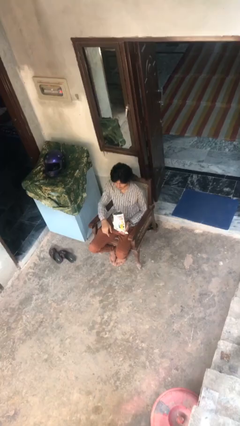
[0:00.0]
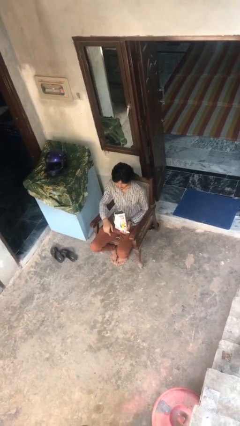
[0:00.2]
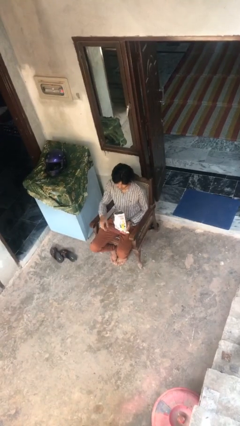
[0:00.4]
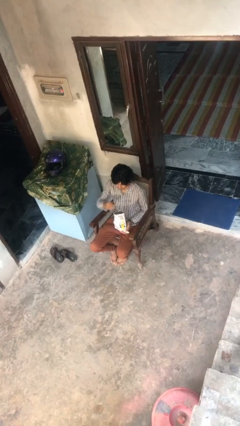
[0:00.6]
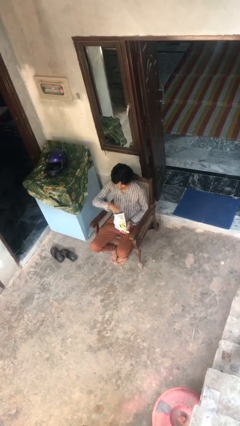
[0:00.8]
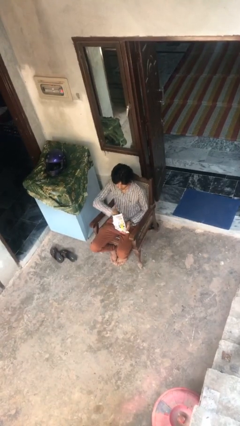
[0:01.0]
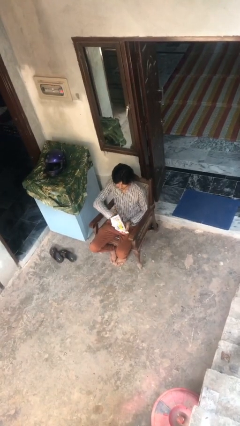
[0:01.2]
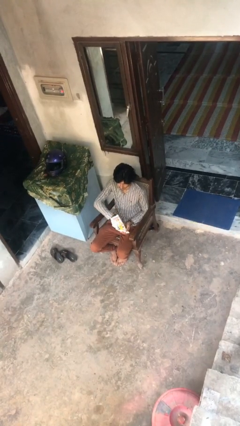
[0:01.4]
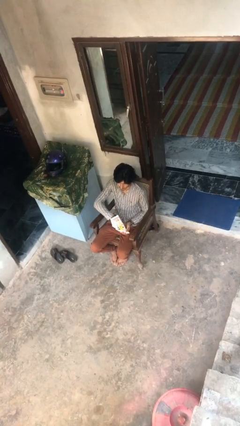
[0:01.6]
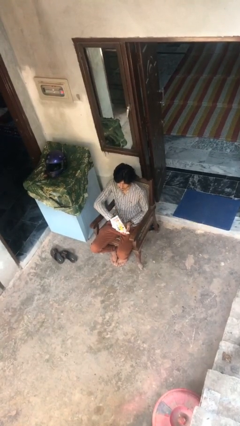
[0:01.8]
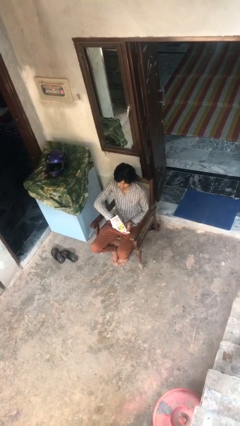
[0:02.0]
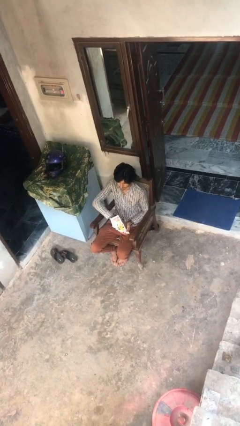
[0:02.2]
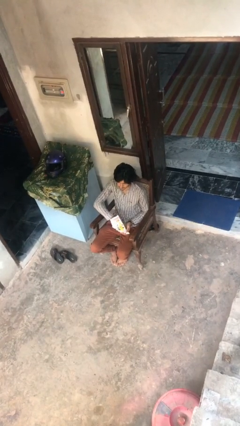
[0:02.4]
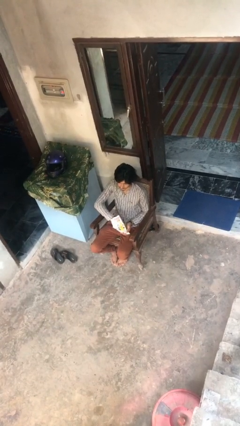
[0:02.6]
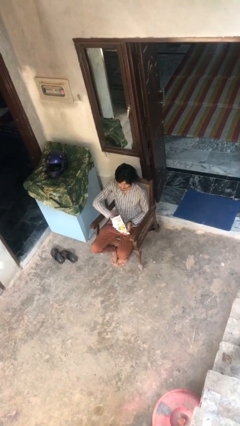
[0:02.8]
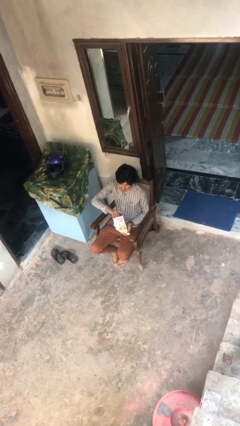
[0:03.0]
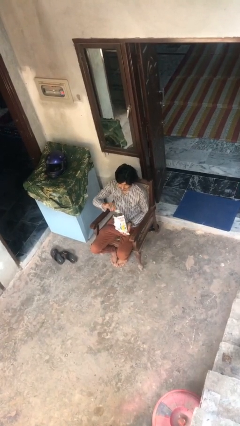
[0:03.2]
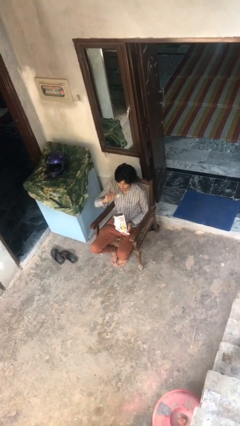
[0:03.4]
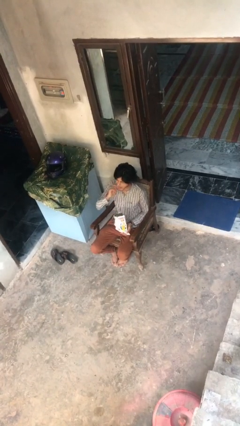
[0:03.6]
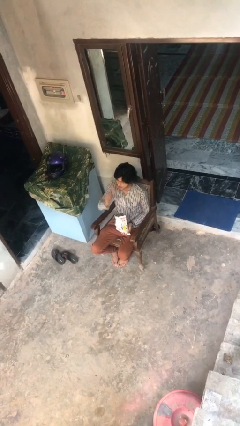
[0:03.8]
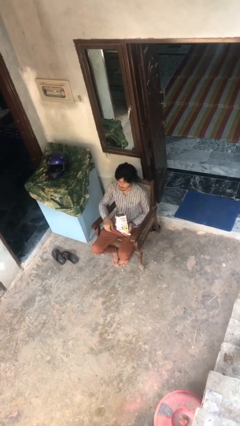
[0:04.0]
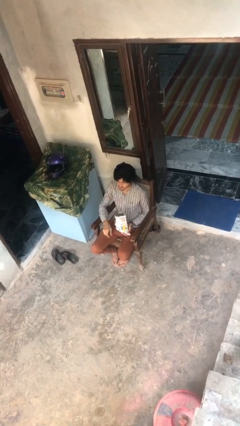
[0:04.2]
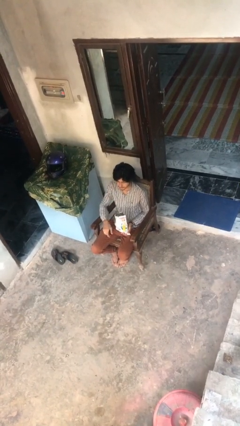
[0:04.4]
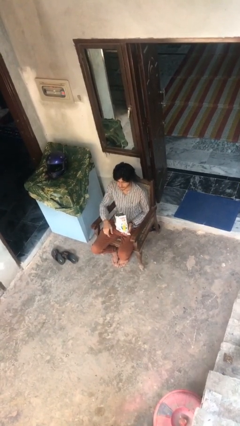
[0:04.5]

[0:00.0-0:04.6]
person eats snack from bag

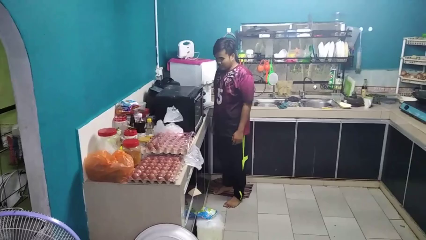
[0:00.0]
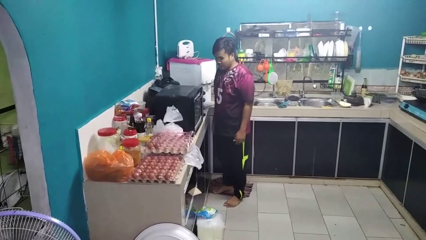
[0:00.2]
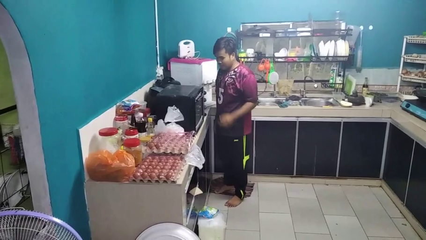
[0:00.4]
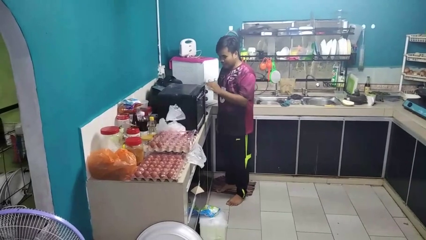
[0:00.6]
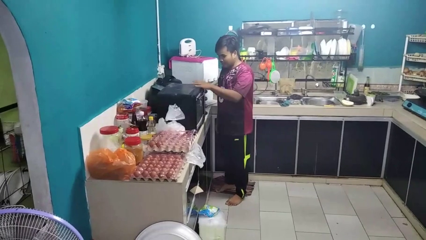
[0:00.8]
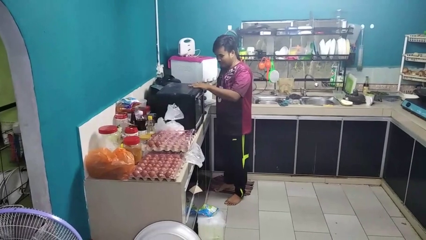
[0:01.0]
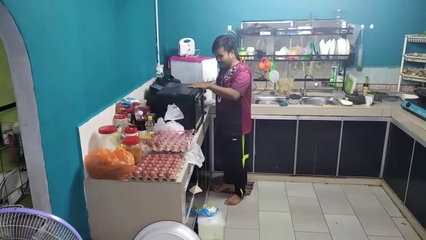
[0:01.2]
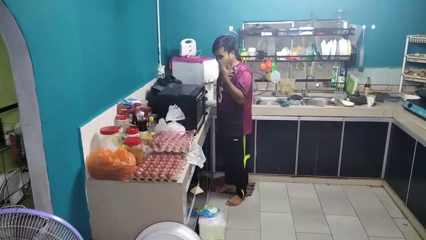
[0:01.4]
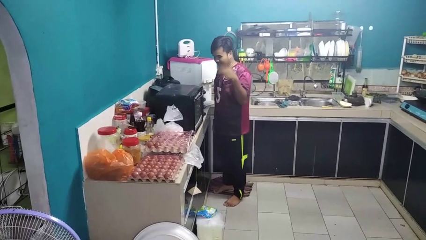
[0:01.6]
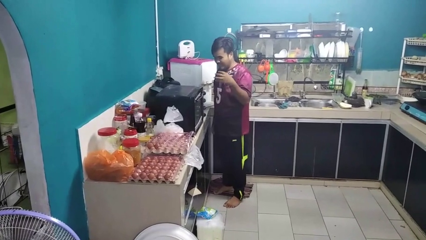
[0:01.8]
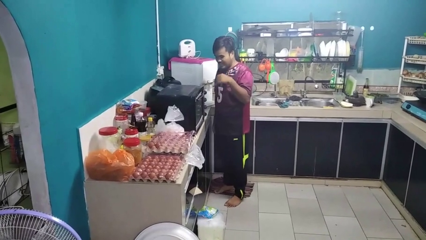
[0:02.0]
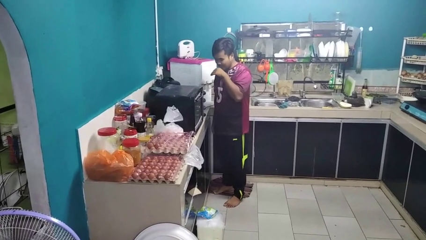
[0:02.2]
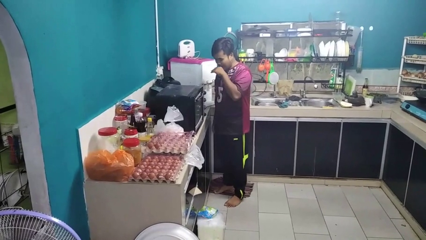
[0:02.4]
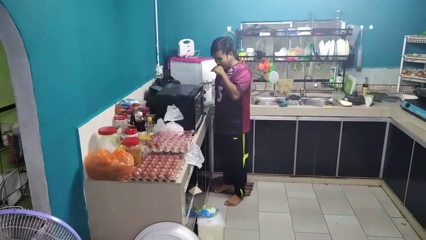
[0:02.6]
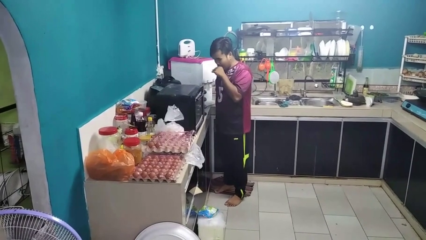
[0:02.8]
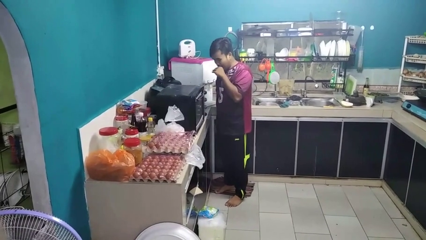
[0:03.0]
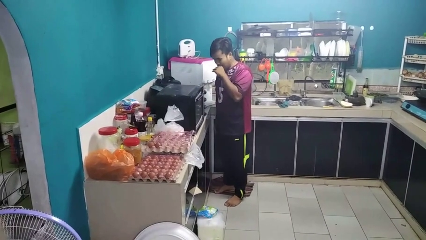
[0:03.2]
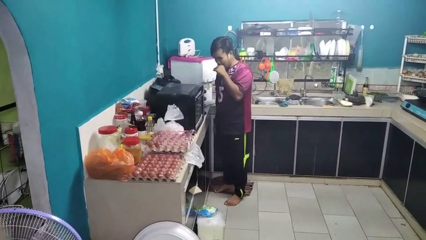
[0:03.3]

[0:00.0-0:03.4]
person burns hand

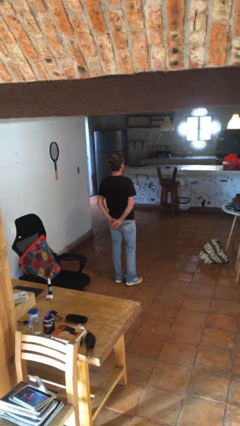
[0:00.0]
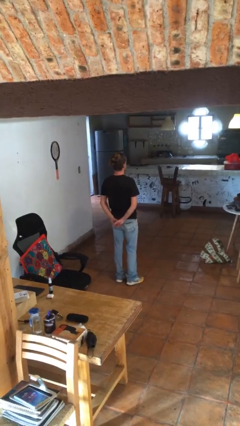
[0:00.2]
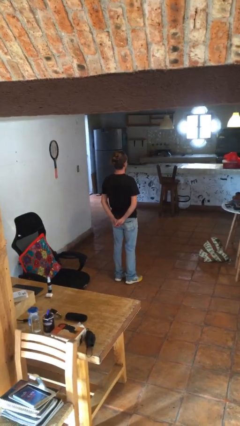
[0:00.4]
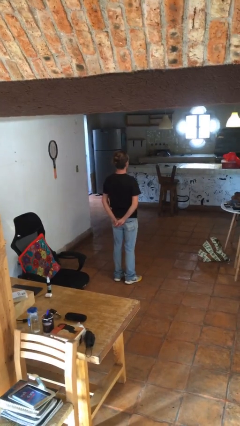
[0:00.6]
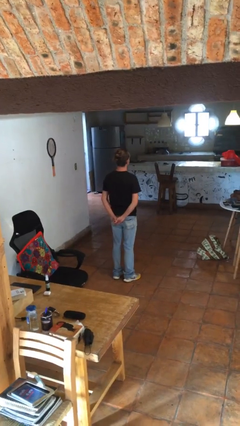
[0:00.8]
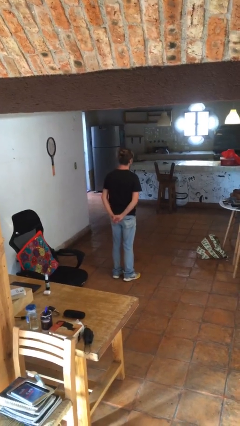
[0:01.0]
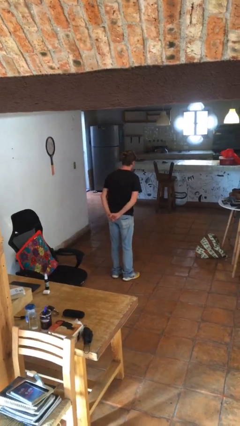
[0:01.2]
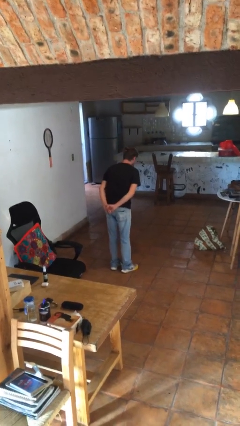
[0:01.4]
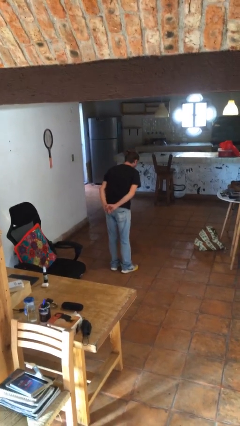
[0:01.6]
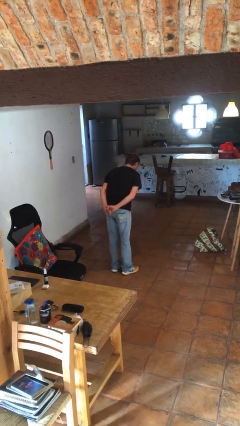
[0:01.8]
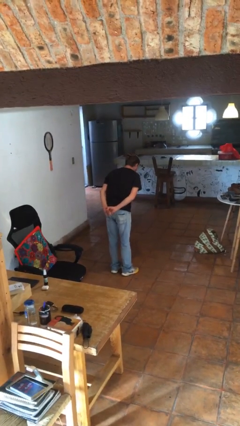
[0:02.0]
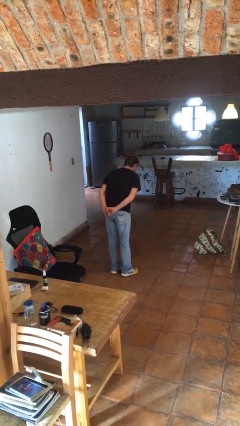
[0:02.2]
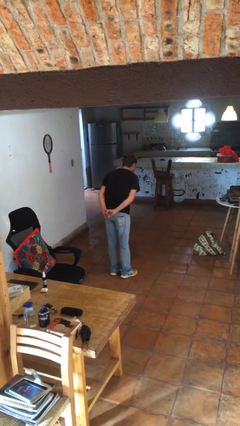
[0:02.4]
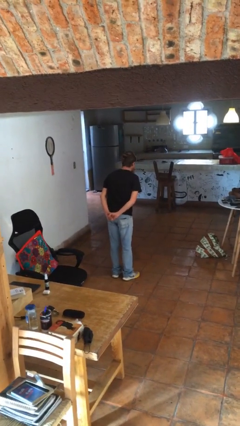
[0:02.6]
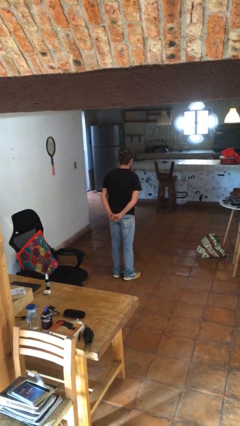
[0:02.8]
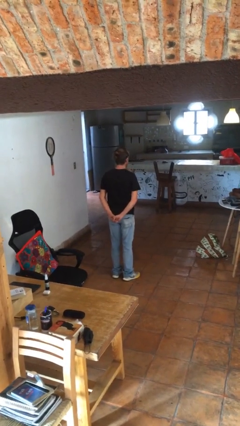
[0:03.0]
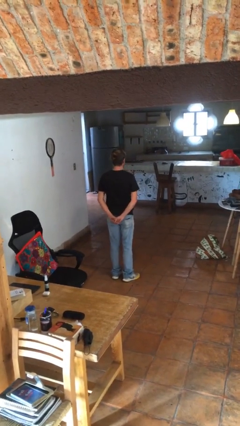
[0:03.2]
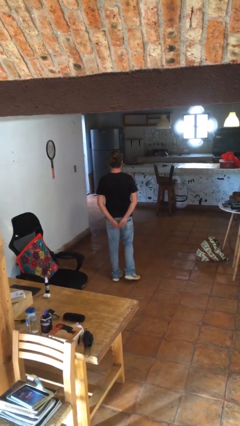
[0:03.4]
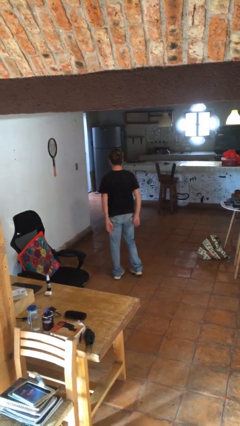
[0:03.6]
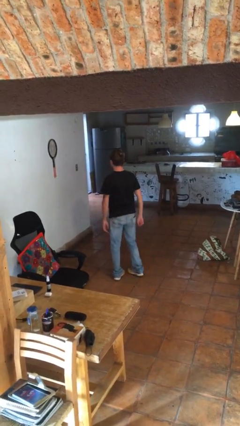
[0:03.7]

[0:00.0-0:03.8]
person bows

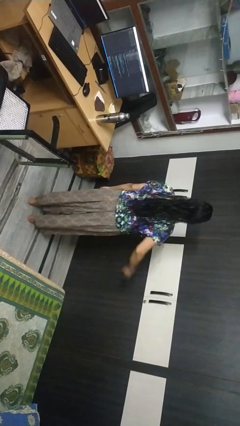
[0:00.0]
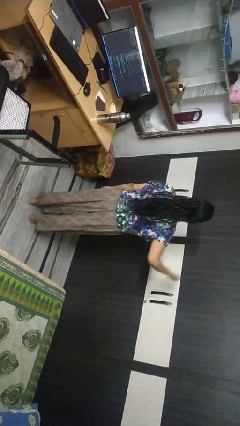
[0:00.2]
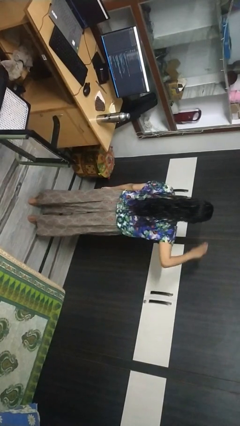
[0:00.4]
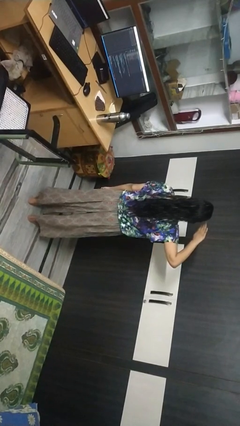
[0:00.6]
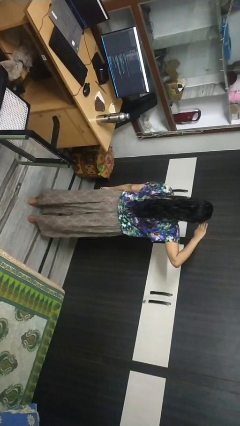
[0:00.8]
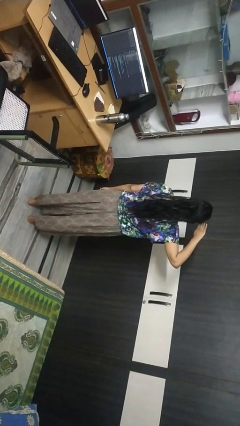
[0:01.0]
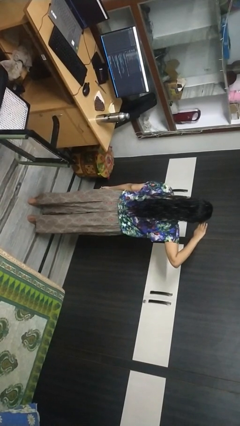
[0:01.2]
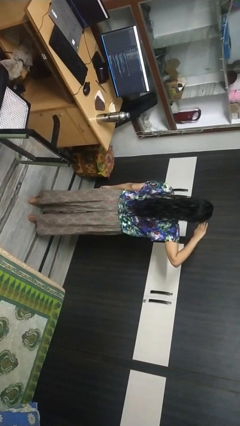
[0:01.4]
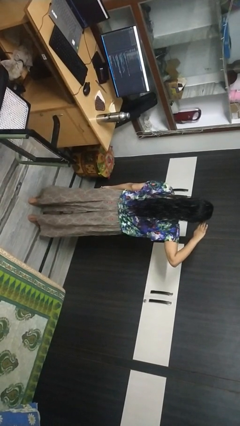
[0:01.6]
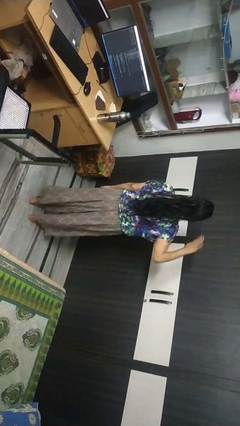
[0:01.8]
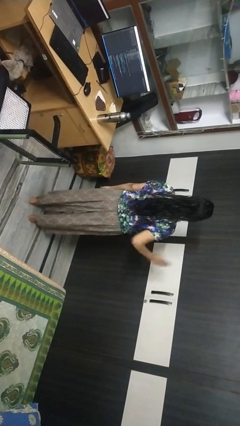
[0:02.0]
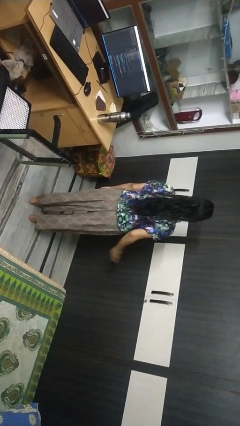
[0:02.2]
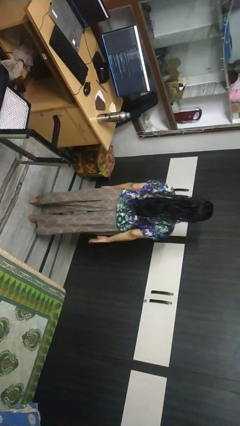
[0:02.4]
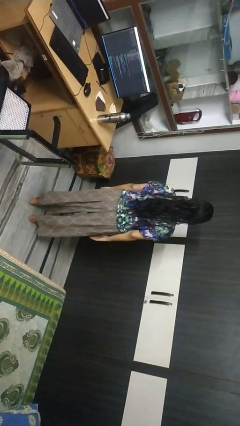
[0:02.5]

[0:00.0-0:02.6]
person salutes

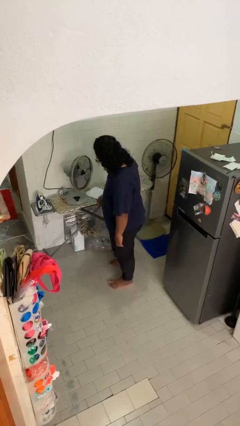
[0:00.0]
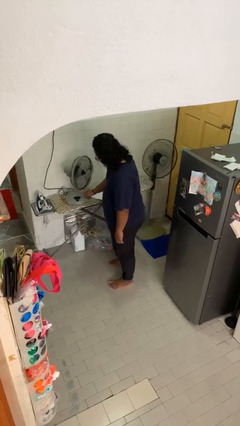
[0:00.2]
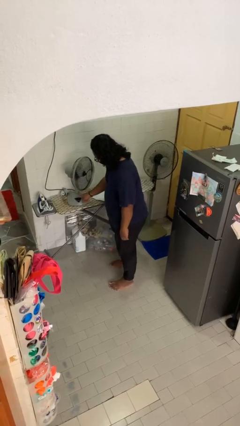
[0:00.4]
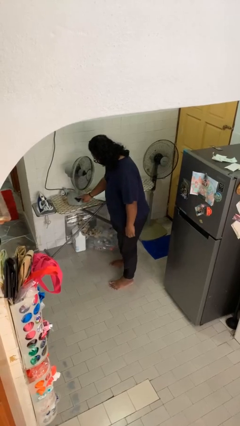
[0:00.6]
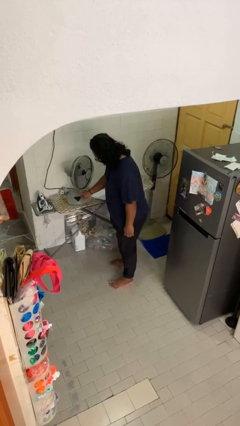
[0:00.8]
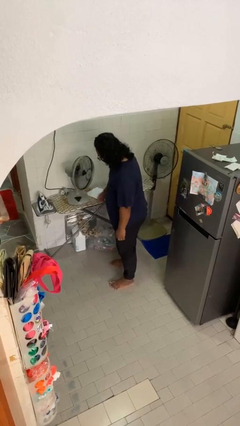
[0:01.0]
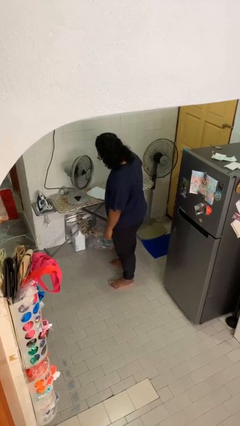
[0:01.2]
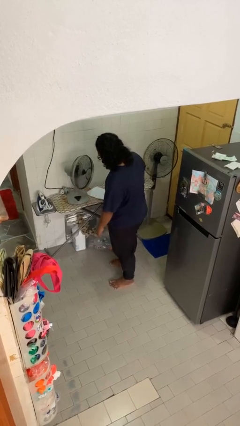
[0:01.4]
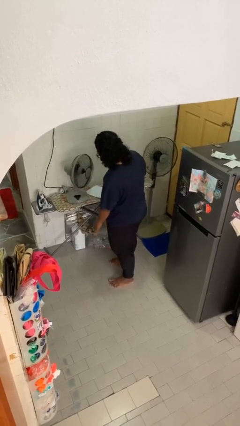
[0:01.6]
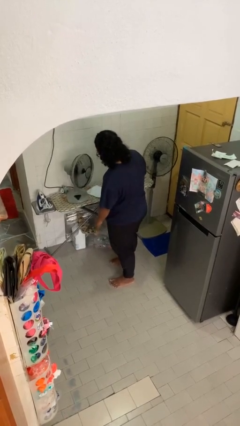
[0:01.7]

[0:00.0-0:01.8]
person turns on fan

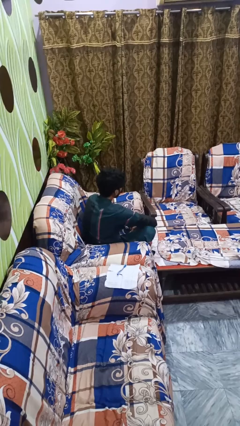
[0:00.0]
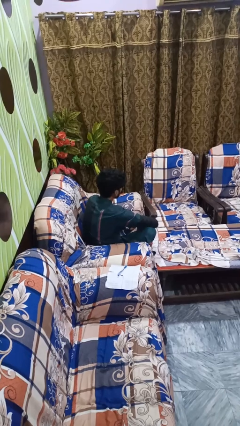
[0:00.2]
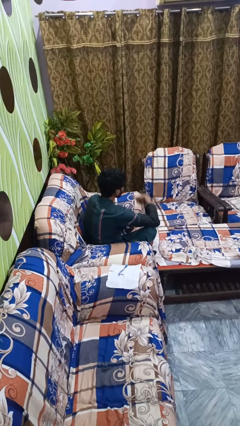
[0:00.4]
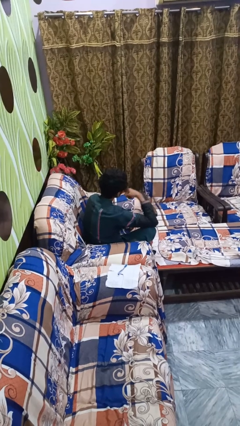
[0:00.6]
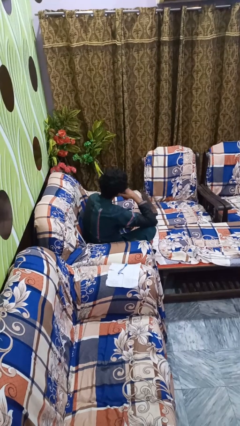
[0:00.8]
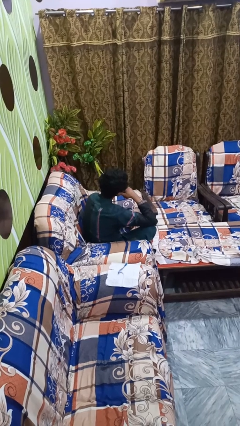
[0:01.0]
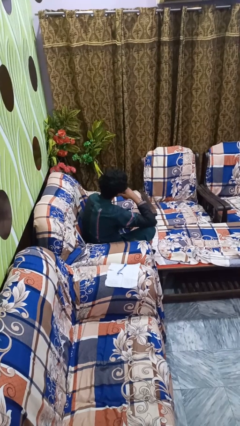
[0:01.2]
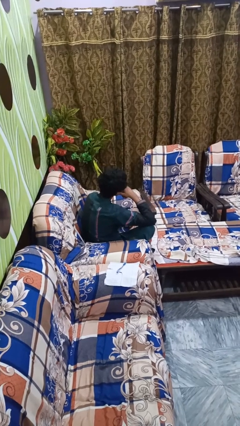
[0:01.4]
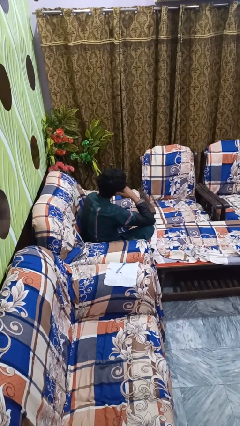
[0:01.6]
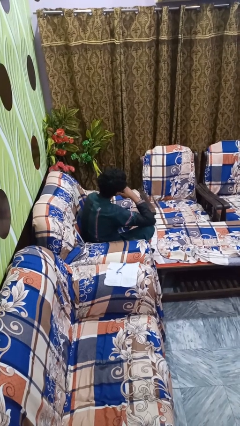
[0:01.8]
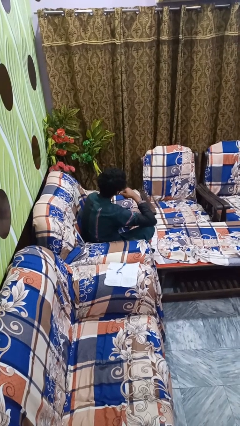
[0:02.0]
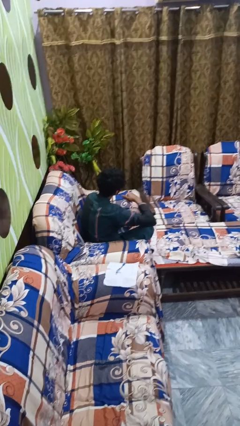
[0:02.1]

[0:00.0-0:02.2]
person gestures call me
